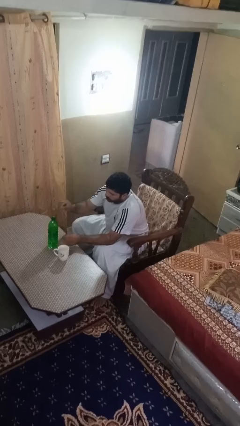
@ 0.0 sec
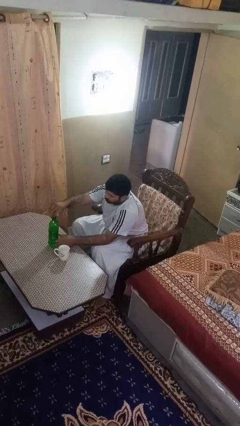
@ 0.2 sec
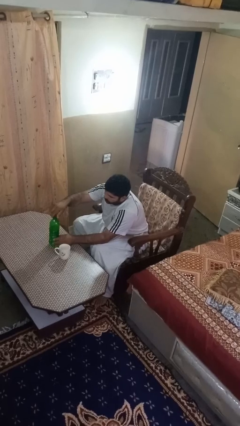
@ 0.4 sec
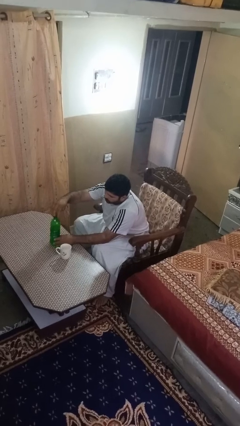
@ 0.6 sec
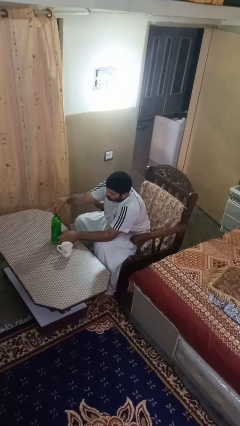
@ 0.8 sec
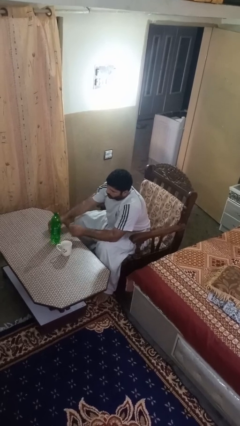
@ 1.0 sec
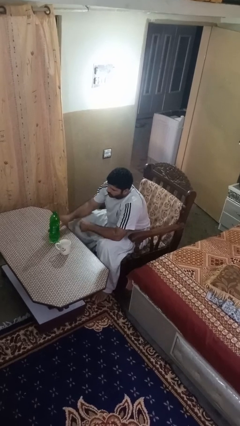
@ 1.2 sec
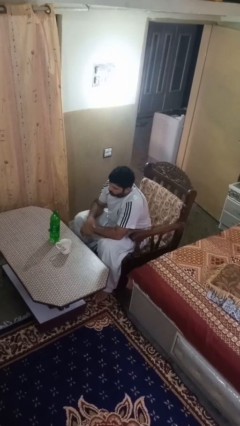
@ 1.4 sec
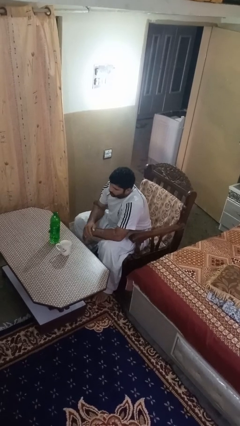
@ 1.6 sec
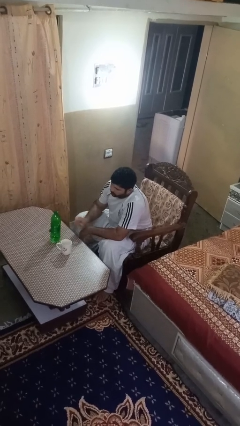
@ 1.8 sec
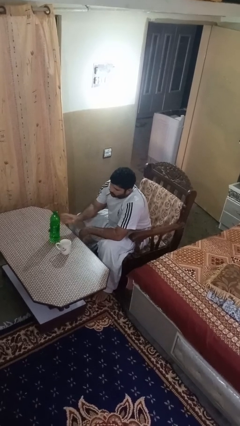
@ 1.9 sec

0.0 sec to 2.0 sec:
person unscrews lid from bottle

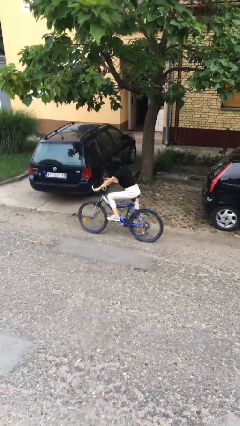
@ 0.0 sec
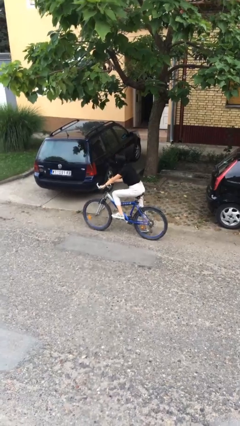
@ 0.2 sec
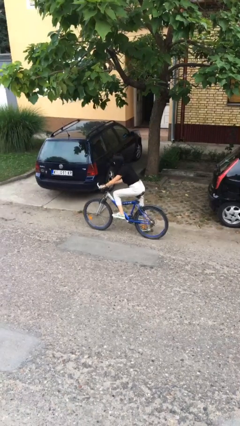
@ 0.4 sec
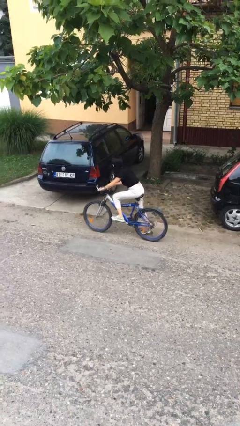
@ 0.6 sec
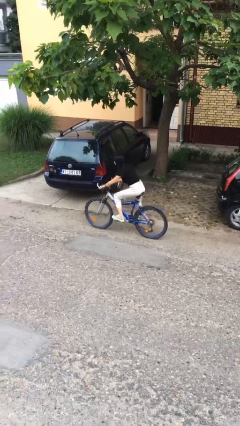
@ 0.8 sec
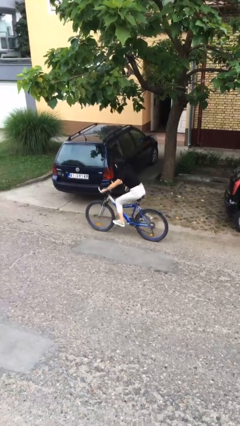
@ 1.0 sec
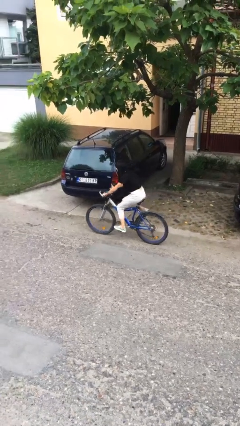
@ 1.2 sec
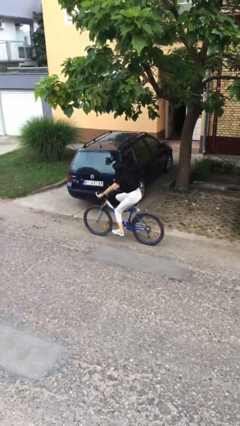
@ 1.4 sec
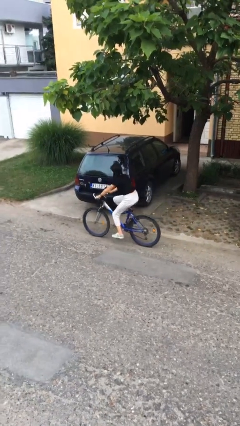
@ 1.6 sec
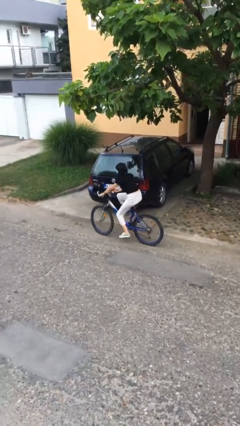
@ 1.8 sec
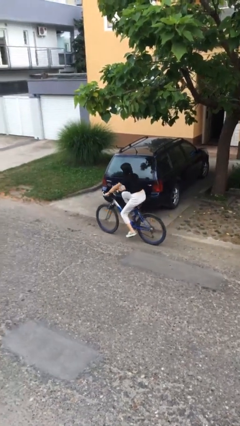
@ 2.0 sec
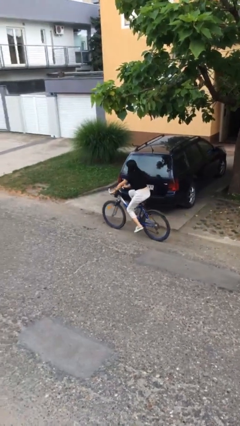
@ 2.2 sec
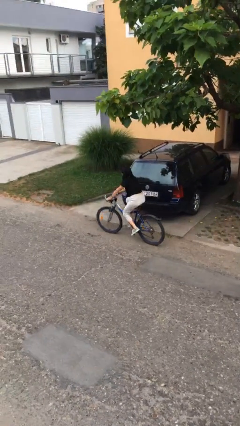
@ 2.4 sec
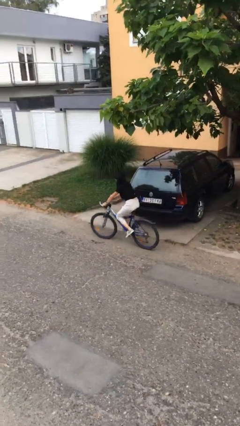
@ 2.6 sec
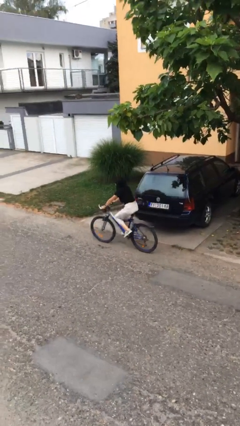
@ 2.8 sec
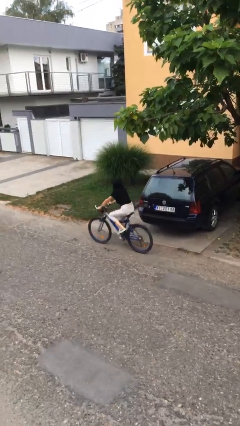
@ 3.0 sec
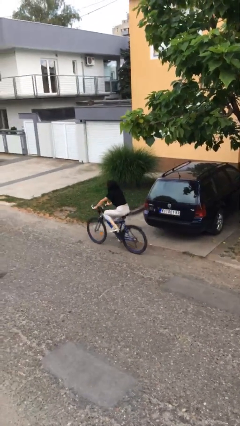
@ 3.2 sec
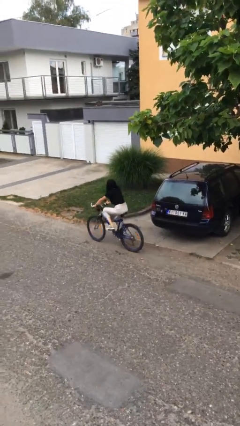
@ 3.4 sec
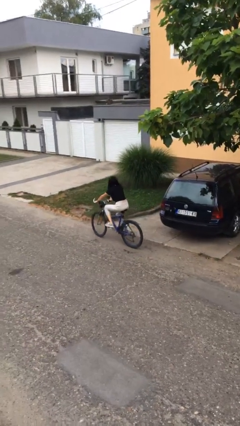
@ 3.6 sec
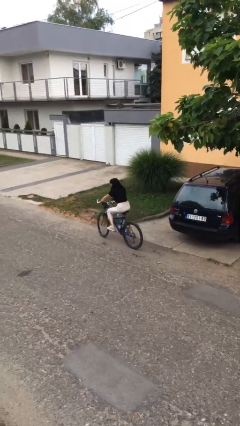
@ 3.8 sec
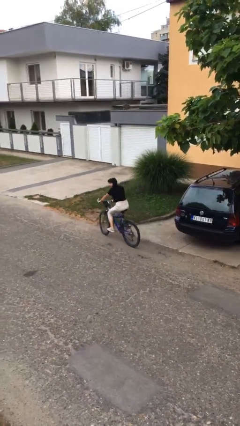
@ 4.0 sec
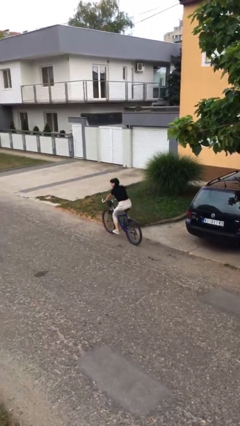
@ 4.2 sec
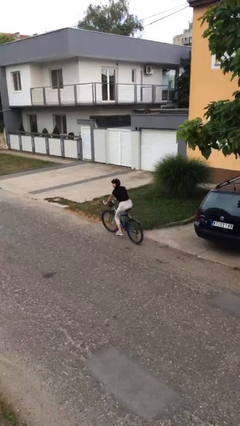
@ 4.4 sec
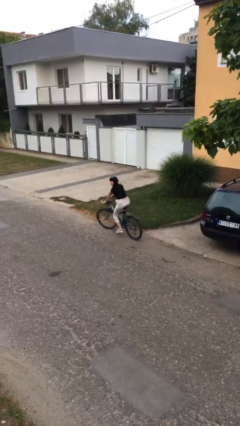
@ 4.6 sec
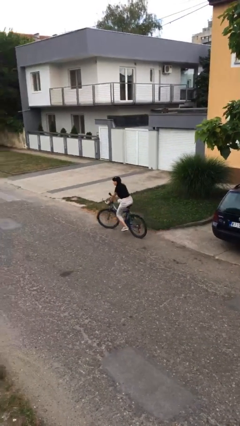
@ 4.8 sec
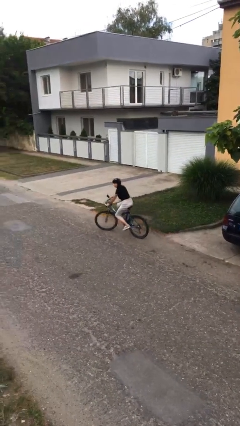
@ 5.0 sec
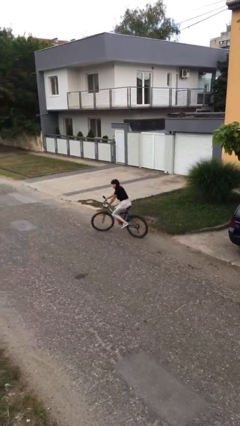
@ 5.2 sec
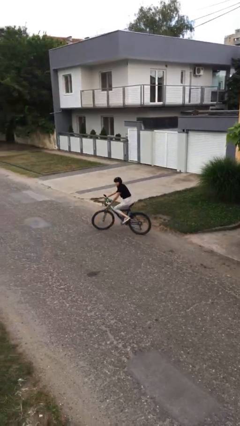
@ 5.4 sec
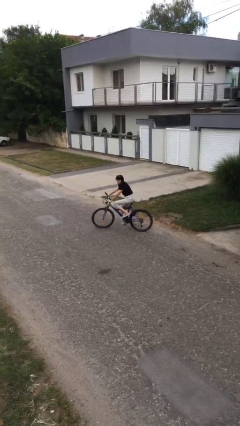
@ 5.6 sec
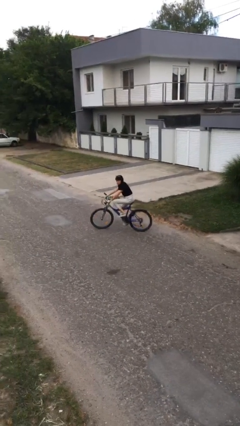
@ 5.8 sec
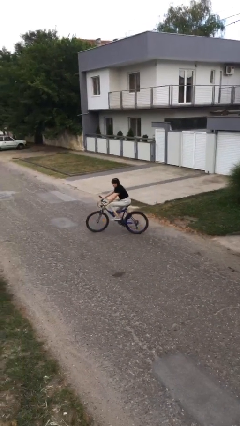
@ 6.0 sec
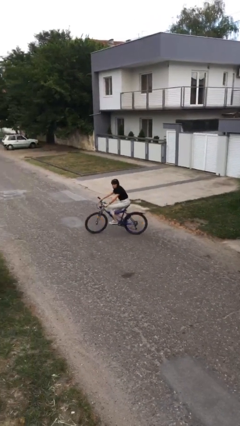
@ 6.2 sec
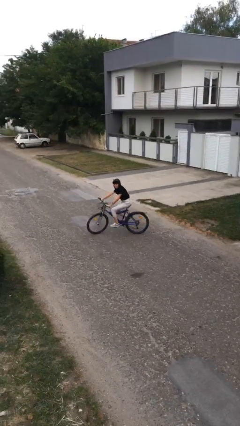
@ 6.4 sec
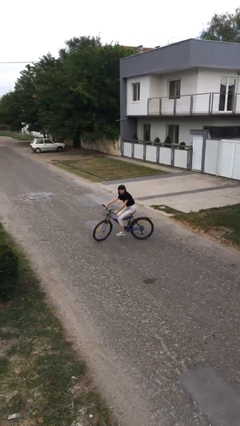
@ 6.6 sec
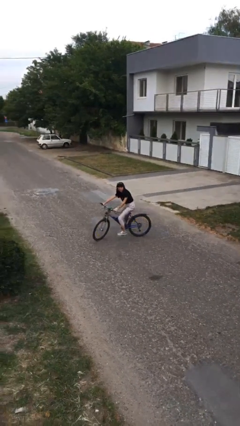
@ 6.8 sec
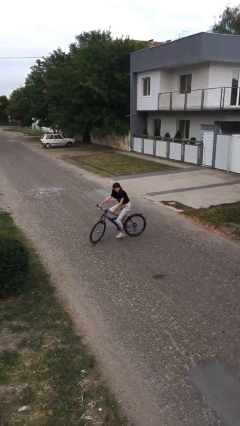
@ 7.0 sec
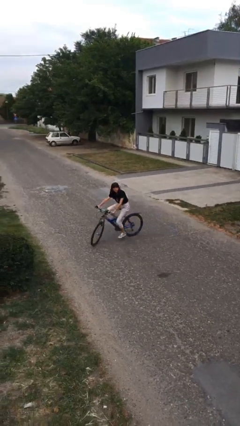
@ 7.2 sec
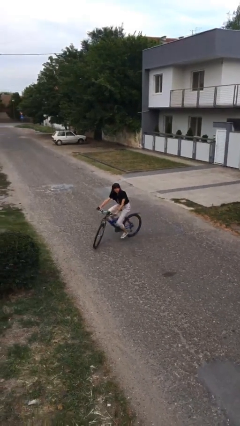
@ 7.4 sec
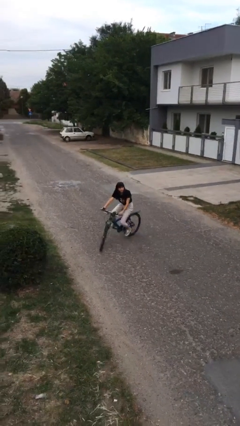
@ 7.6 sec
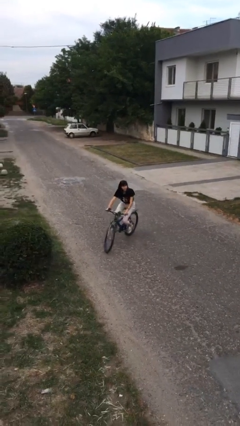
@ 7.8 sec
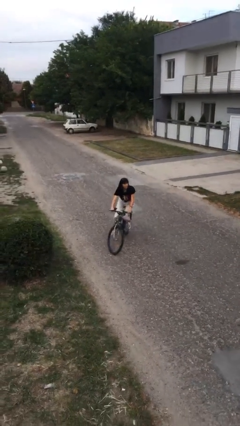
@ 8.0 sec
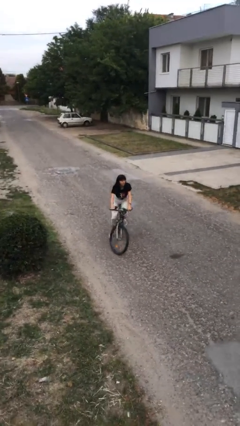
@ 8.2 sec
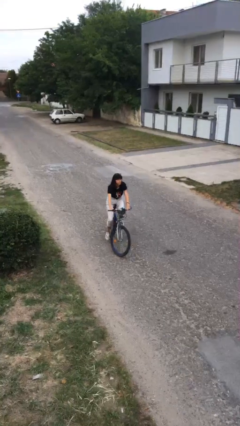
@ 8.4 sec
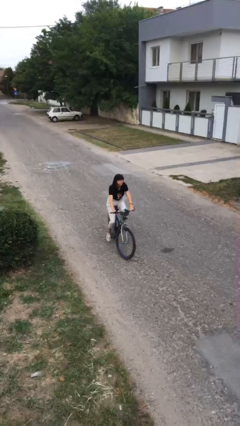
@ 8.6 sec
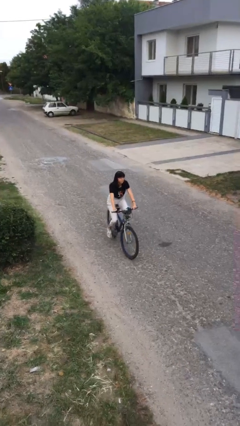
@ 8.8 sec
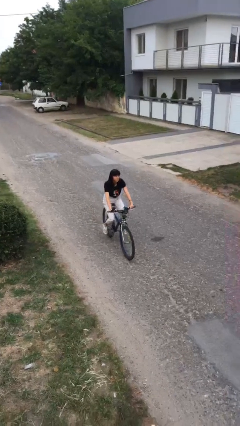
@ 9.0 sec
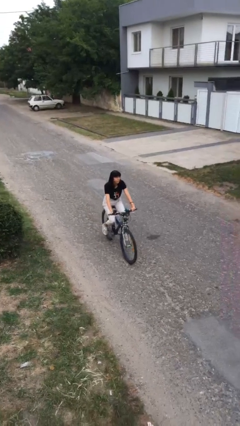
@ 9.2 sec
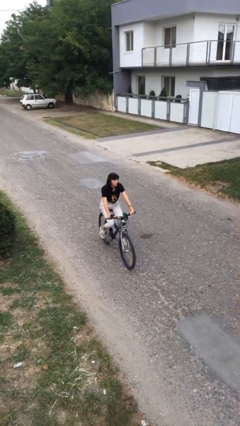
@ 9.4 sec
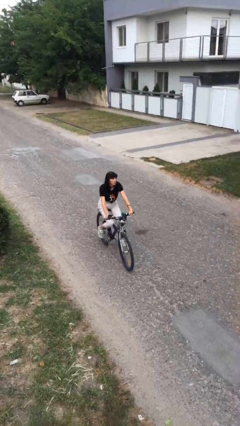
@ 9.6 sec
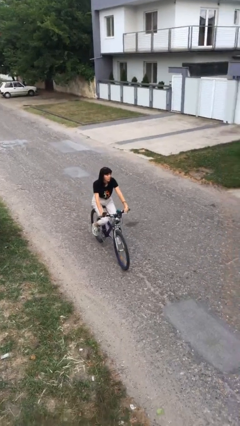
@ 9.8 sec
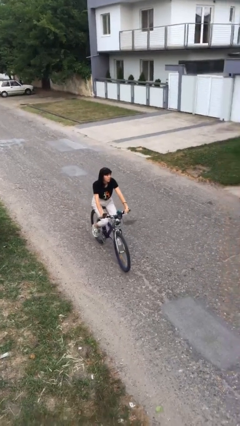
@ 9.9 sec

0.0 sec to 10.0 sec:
person rides bicycle

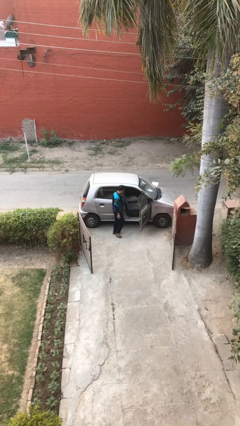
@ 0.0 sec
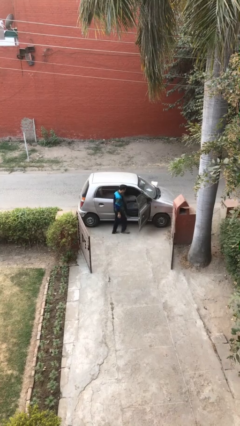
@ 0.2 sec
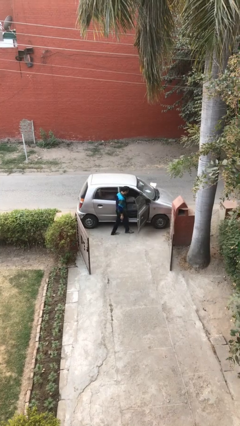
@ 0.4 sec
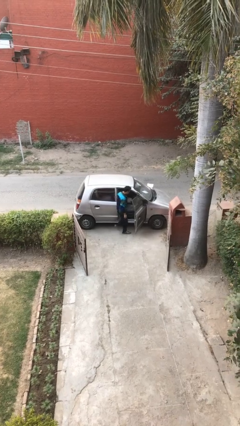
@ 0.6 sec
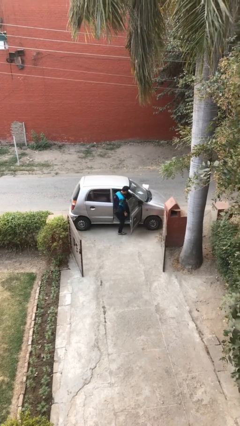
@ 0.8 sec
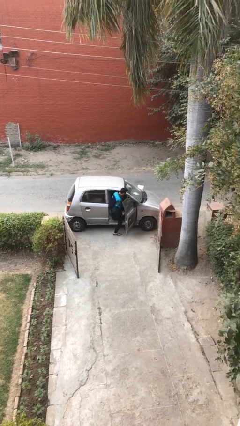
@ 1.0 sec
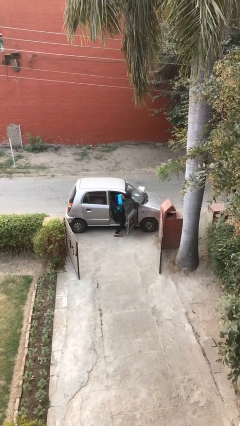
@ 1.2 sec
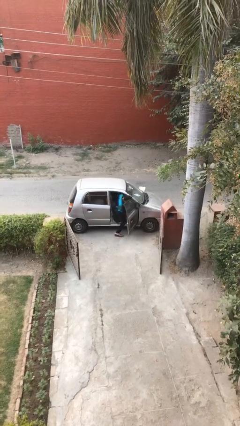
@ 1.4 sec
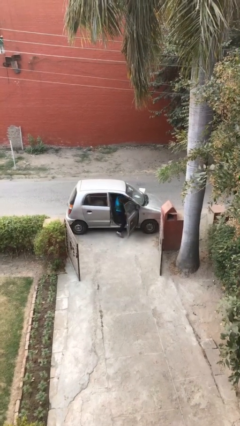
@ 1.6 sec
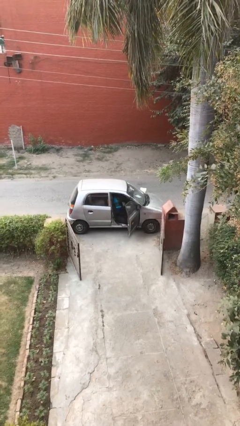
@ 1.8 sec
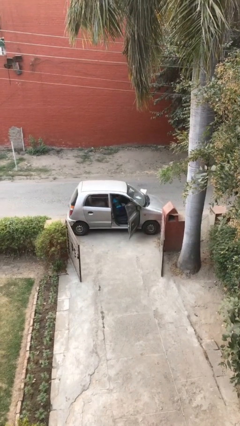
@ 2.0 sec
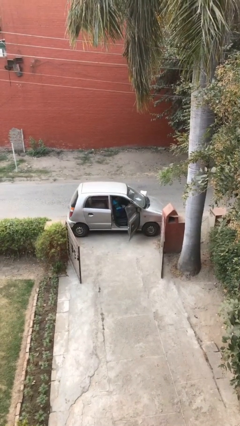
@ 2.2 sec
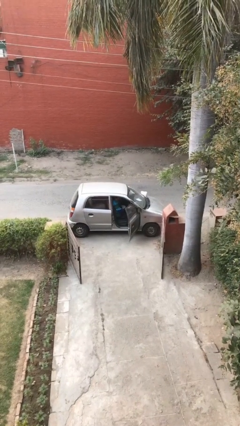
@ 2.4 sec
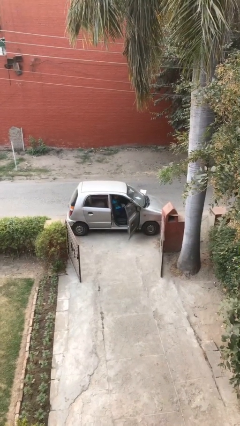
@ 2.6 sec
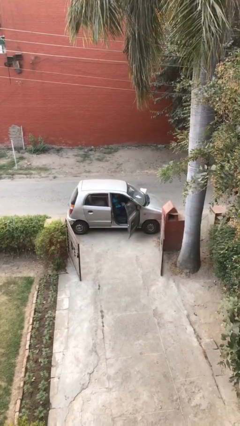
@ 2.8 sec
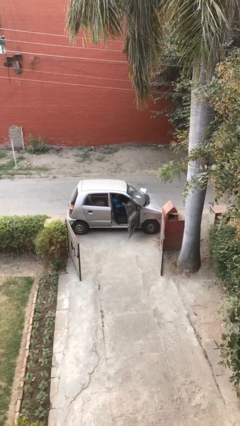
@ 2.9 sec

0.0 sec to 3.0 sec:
person enters car

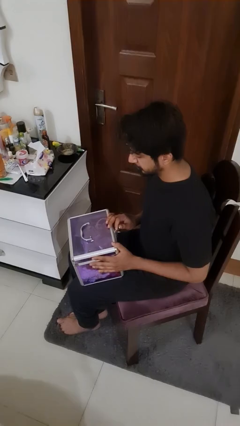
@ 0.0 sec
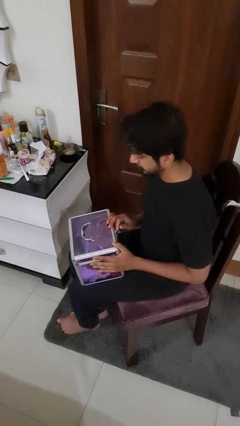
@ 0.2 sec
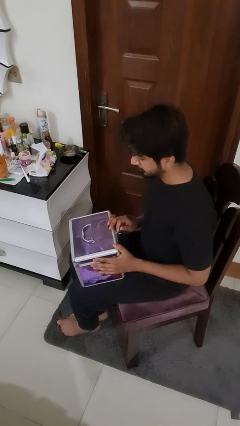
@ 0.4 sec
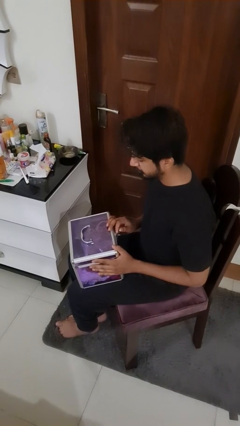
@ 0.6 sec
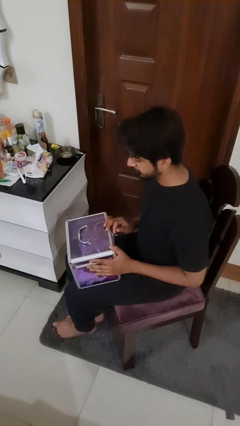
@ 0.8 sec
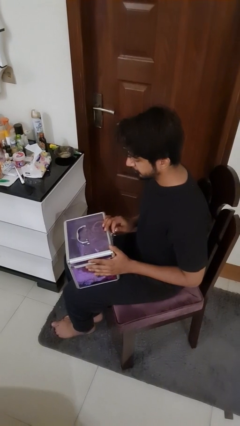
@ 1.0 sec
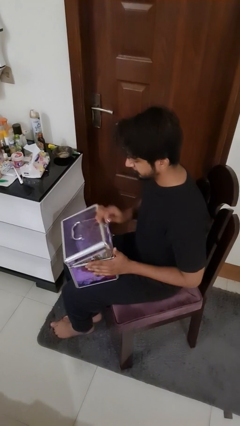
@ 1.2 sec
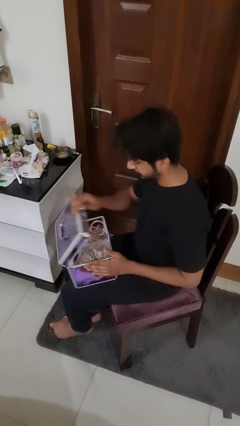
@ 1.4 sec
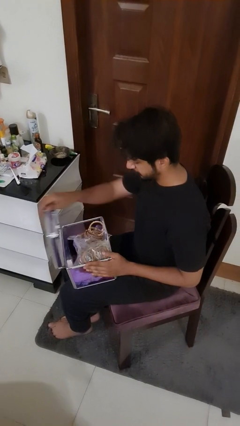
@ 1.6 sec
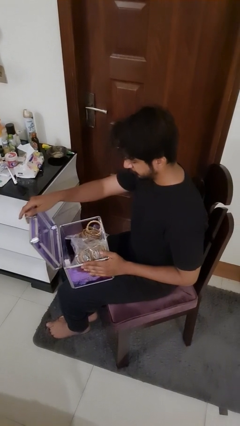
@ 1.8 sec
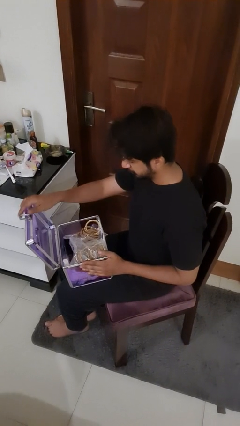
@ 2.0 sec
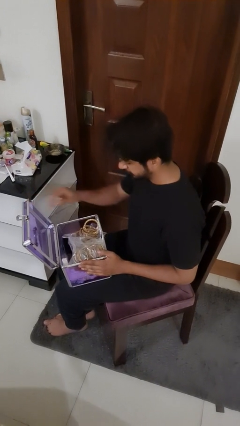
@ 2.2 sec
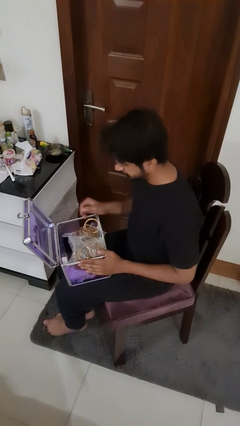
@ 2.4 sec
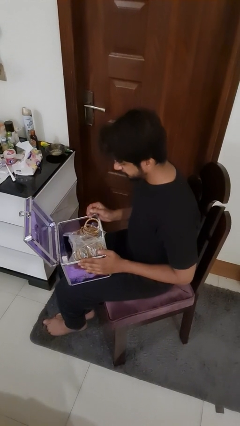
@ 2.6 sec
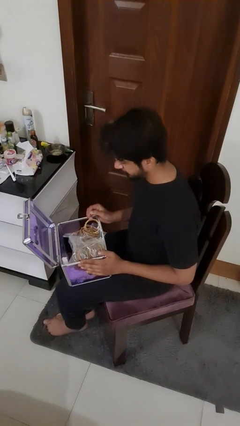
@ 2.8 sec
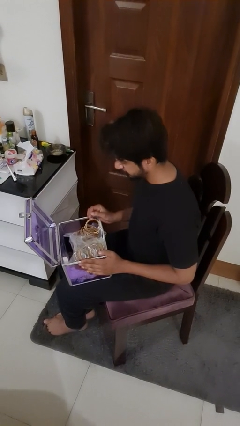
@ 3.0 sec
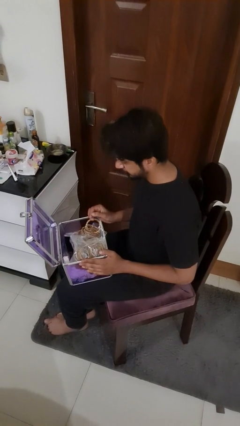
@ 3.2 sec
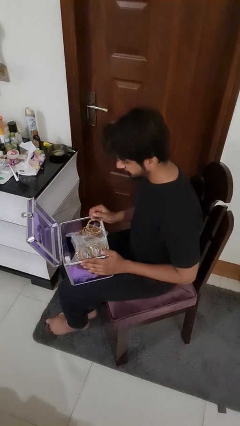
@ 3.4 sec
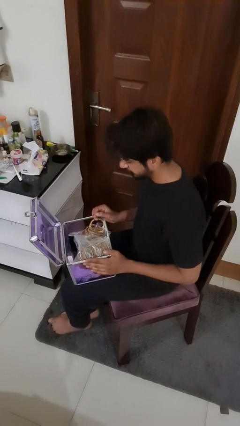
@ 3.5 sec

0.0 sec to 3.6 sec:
person opens jewelry box
